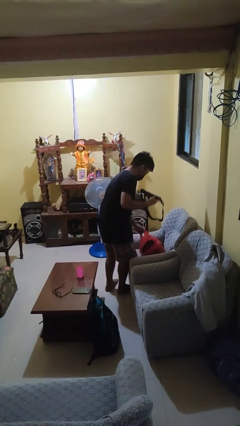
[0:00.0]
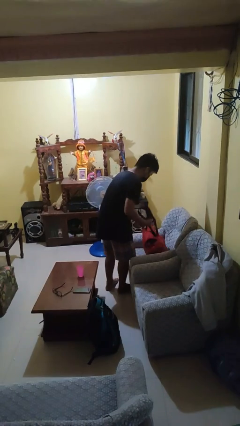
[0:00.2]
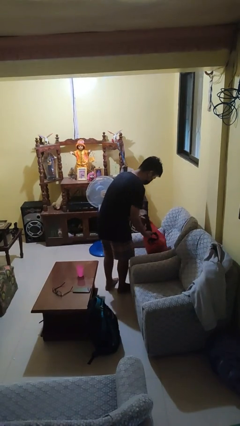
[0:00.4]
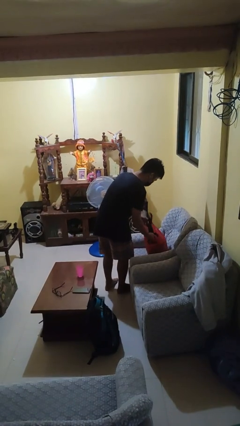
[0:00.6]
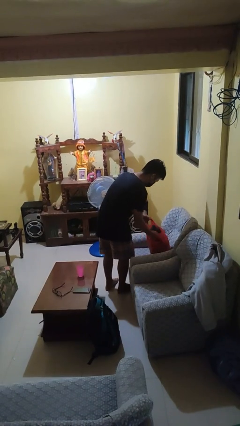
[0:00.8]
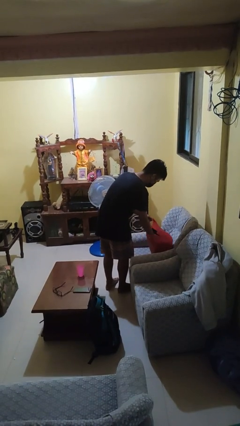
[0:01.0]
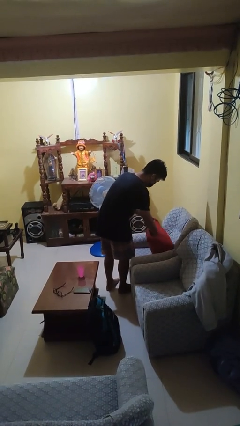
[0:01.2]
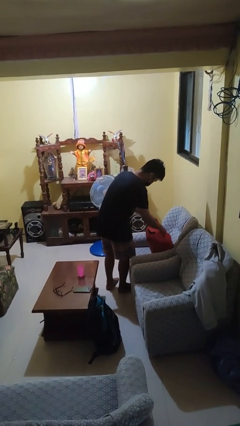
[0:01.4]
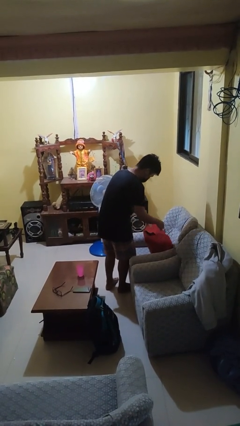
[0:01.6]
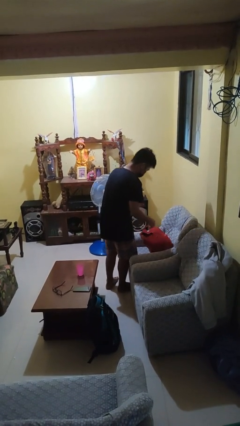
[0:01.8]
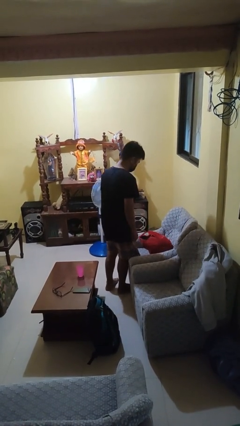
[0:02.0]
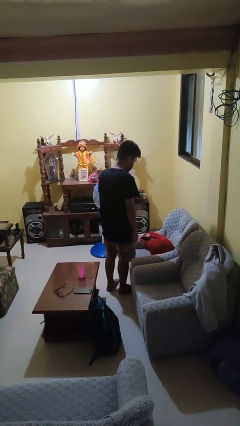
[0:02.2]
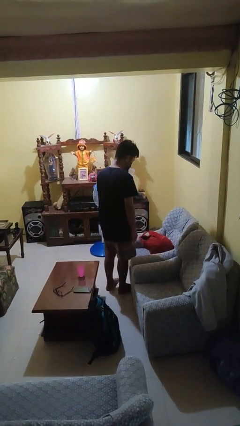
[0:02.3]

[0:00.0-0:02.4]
person puts object into bag

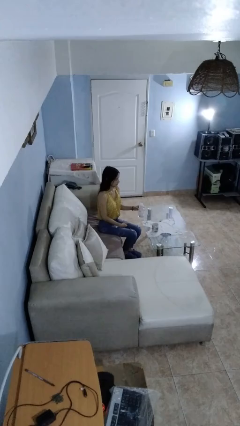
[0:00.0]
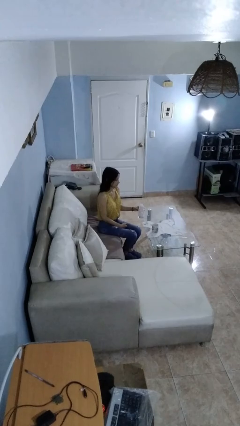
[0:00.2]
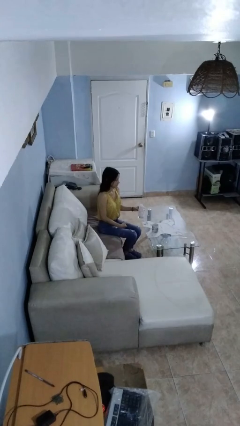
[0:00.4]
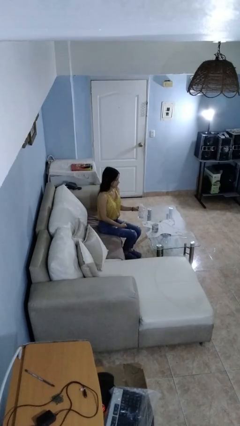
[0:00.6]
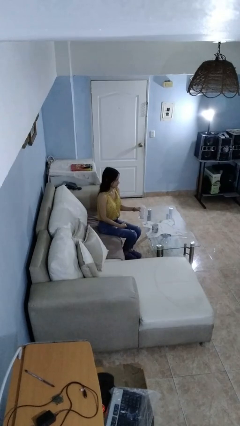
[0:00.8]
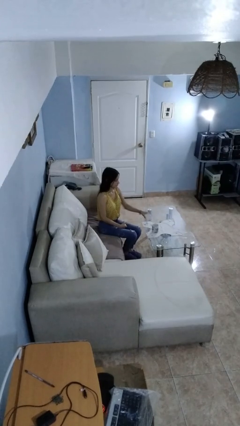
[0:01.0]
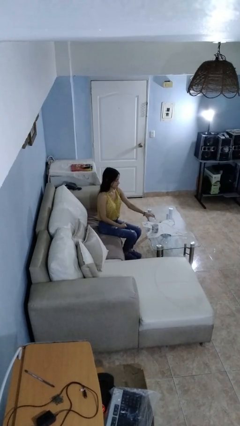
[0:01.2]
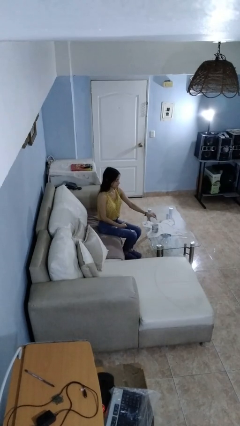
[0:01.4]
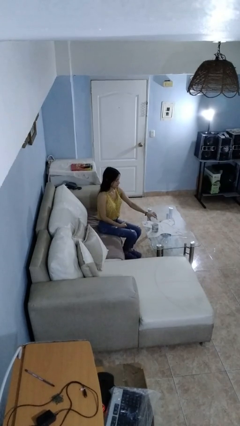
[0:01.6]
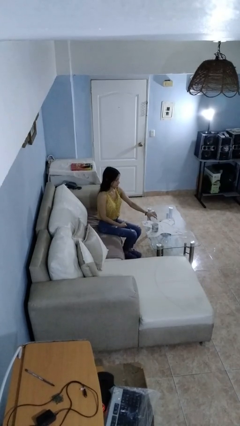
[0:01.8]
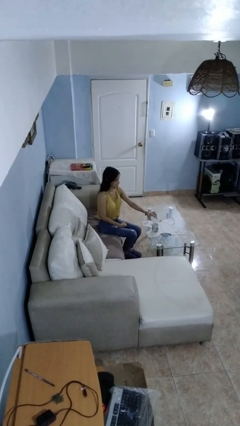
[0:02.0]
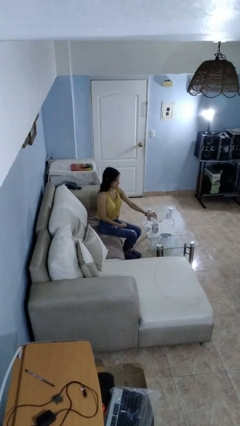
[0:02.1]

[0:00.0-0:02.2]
person pours liquid into cup

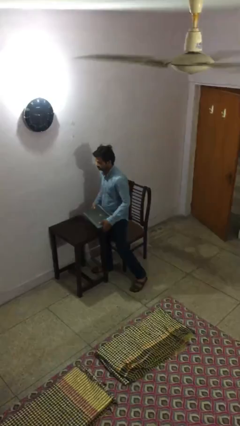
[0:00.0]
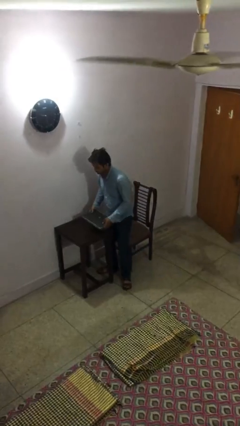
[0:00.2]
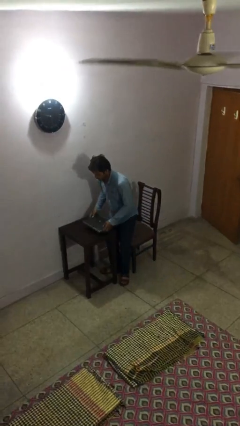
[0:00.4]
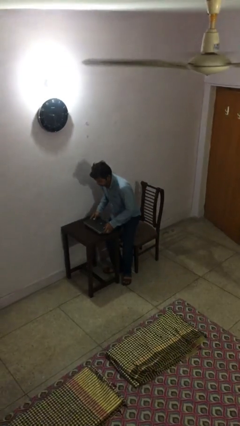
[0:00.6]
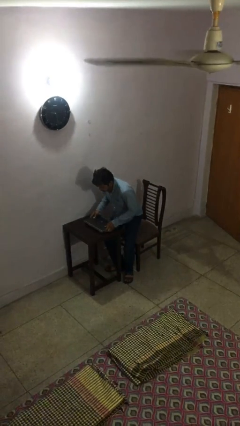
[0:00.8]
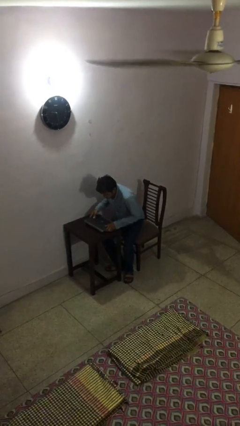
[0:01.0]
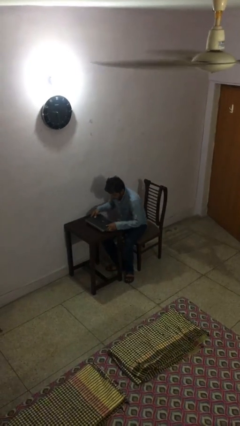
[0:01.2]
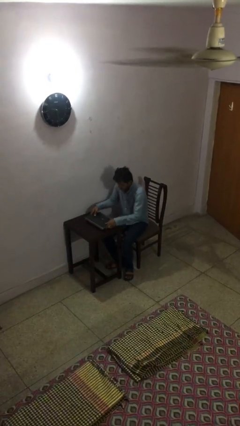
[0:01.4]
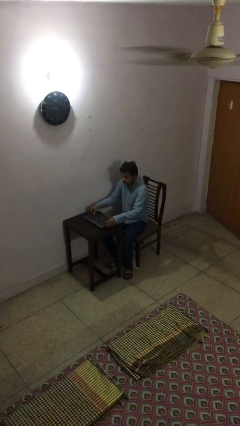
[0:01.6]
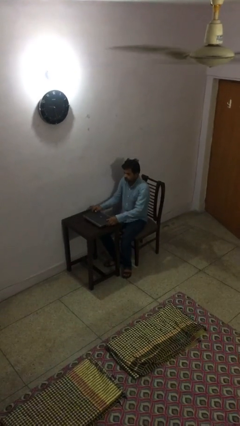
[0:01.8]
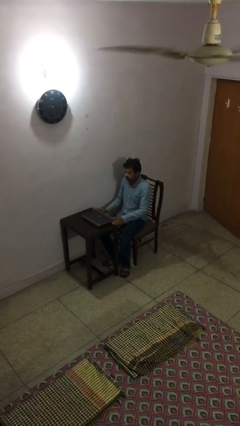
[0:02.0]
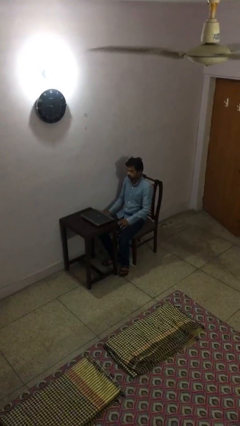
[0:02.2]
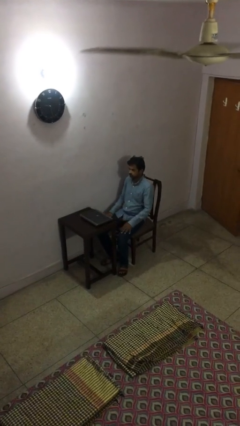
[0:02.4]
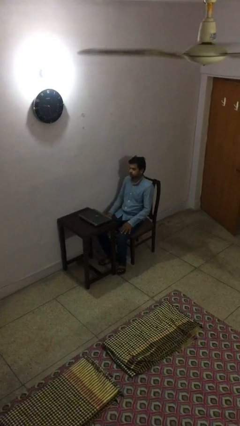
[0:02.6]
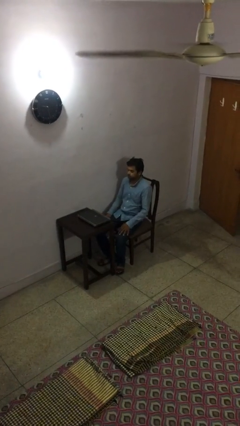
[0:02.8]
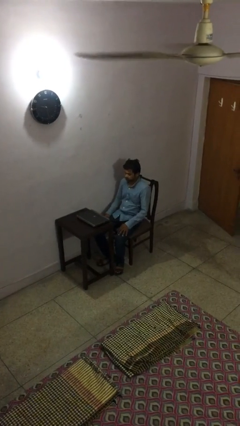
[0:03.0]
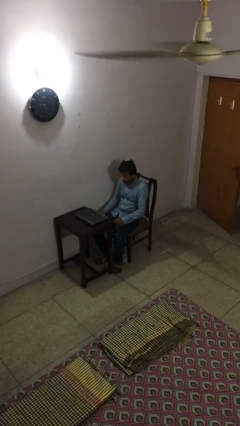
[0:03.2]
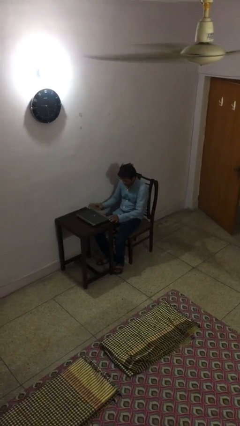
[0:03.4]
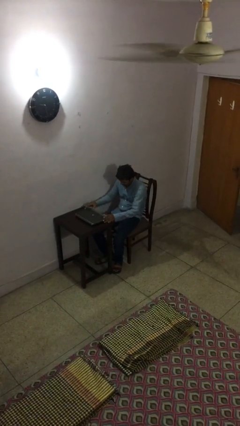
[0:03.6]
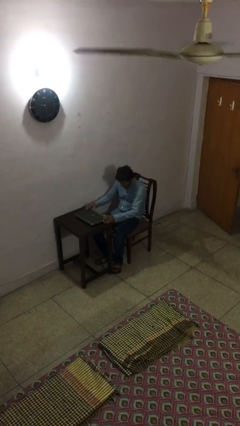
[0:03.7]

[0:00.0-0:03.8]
person sits down

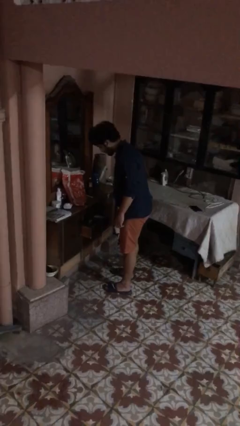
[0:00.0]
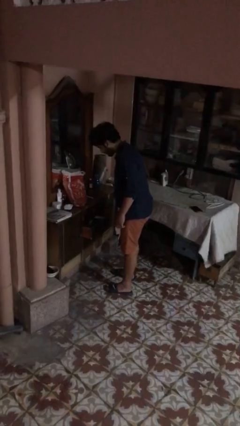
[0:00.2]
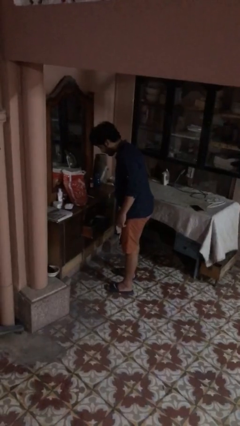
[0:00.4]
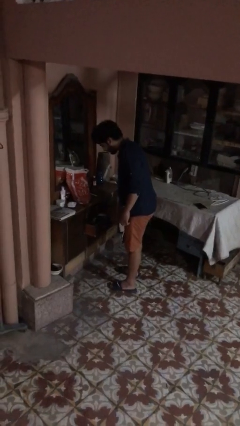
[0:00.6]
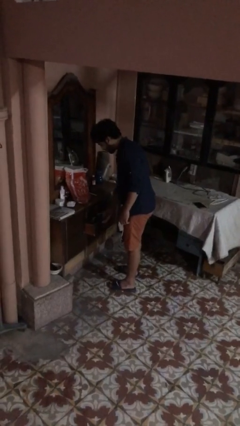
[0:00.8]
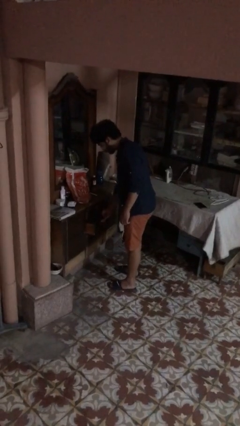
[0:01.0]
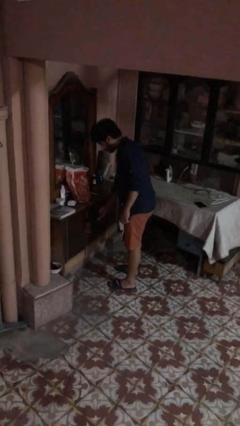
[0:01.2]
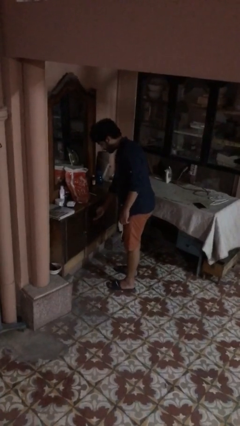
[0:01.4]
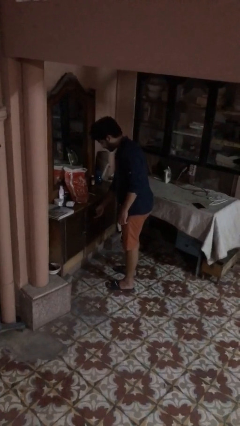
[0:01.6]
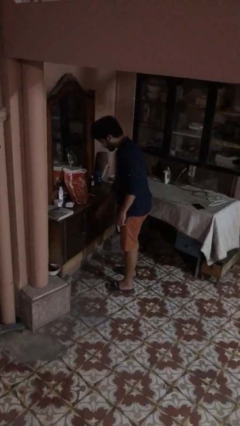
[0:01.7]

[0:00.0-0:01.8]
person closes dresser drawer

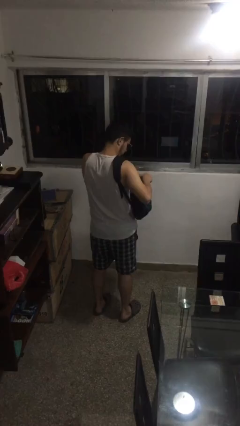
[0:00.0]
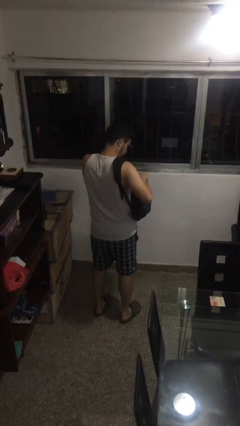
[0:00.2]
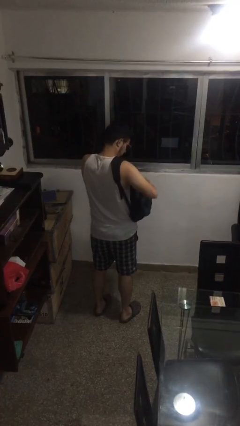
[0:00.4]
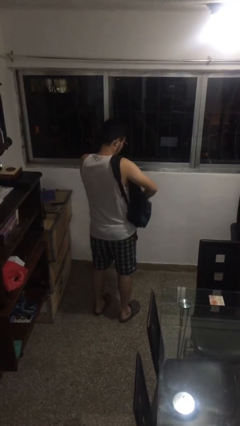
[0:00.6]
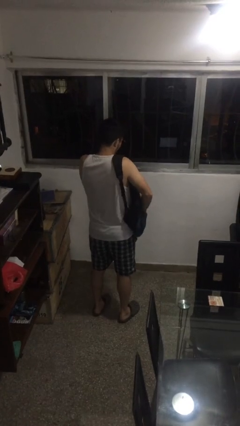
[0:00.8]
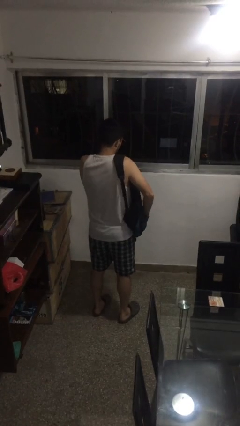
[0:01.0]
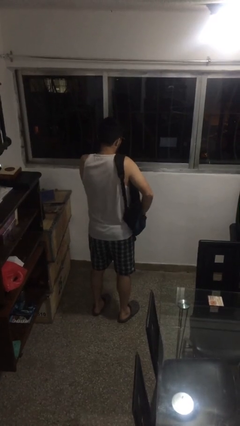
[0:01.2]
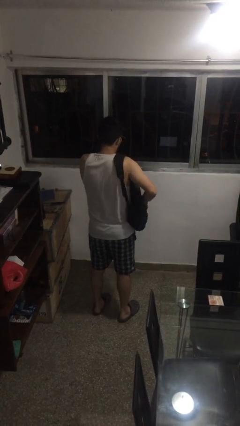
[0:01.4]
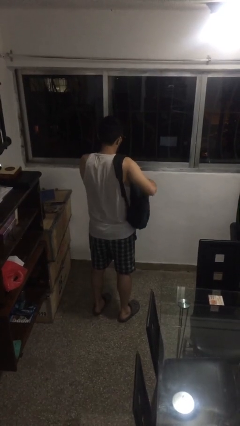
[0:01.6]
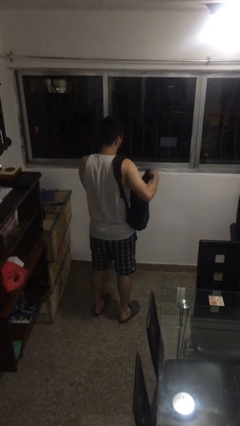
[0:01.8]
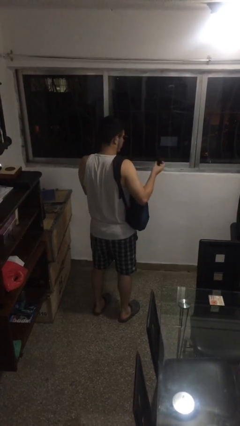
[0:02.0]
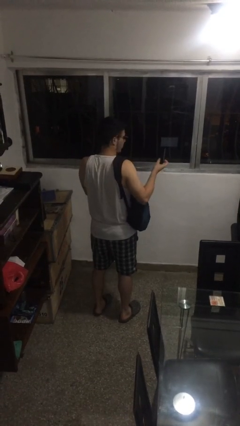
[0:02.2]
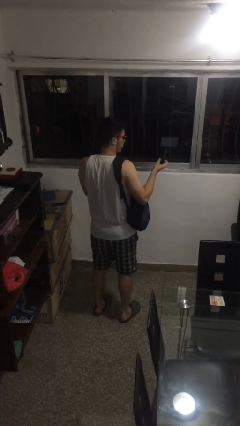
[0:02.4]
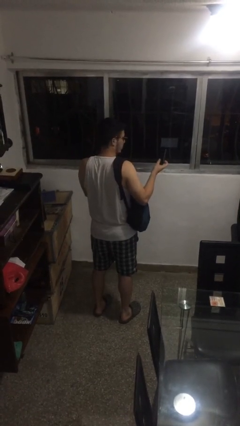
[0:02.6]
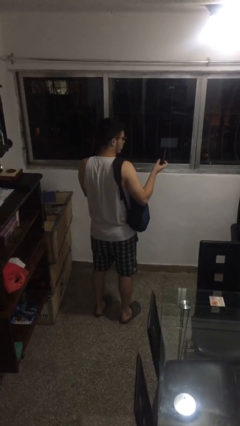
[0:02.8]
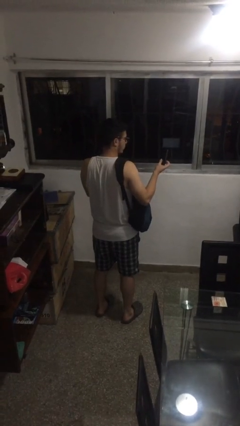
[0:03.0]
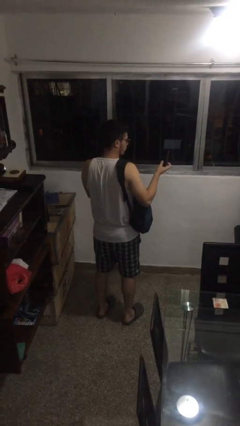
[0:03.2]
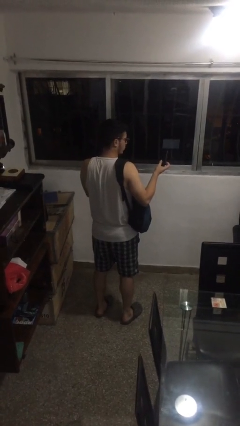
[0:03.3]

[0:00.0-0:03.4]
person takes object from backpack

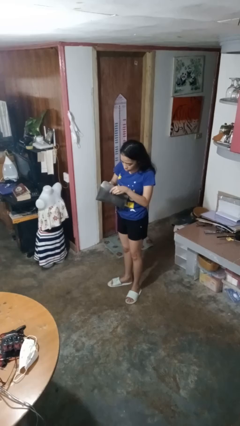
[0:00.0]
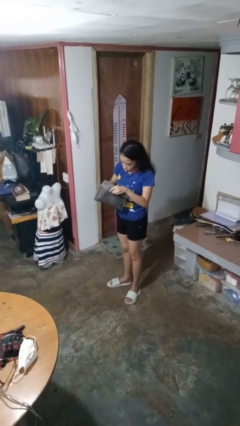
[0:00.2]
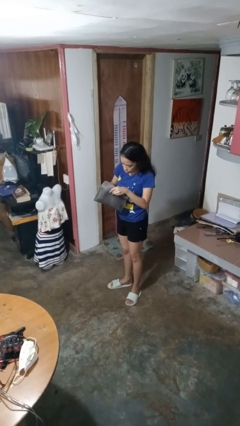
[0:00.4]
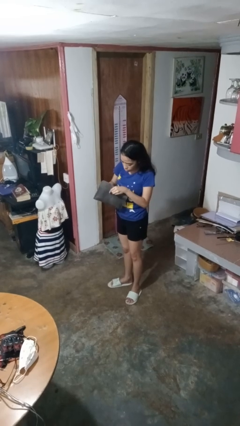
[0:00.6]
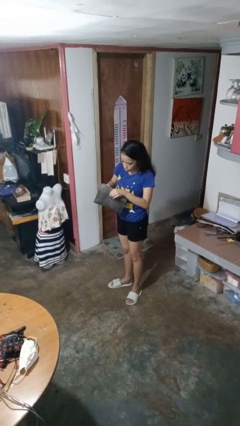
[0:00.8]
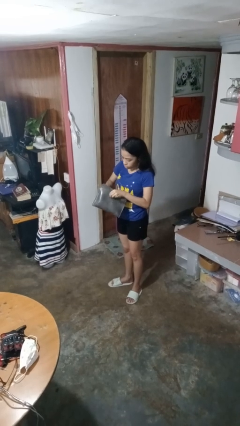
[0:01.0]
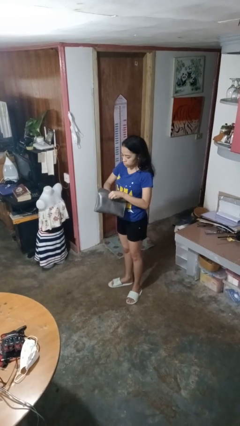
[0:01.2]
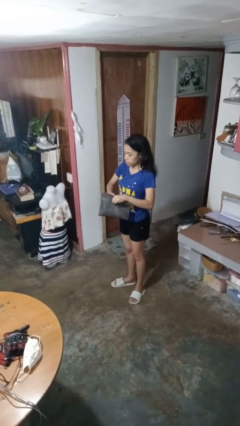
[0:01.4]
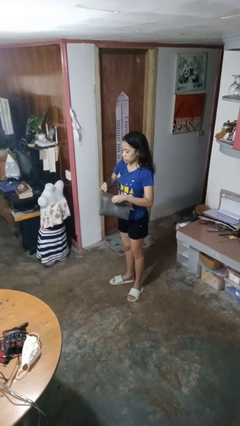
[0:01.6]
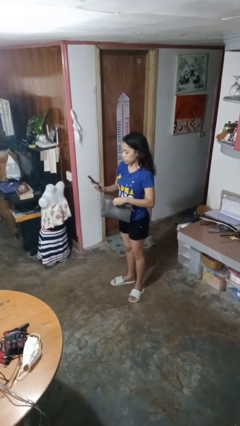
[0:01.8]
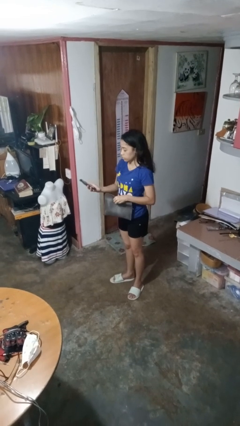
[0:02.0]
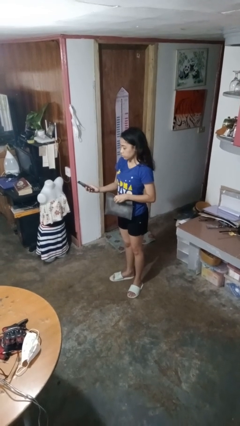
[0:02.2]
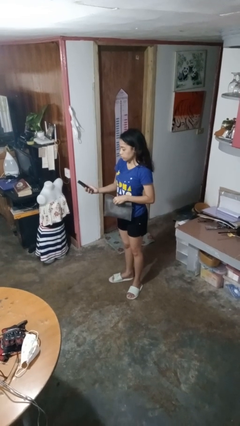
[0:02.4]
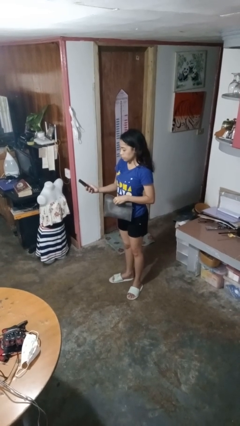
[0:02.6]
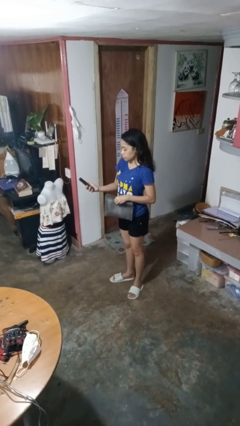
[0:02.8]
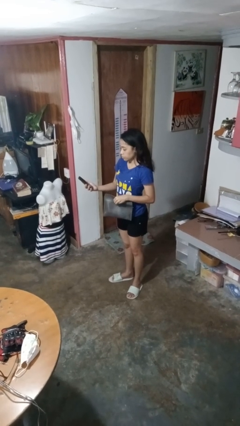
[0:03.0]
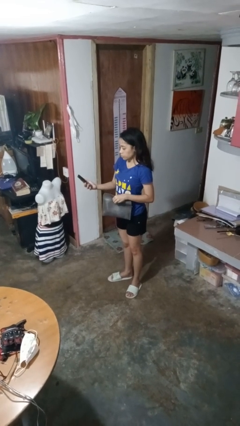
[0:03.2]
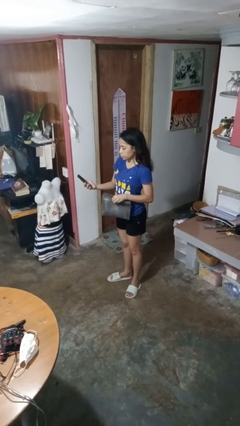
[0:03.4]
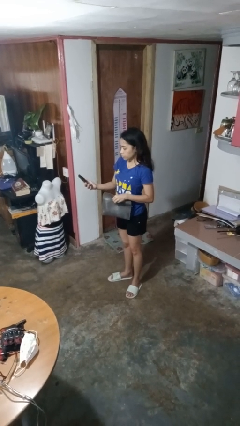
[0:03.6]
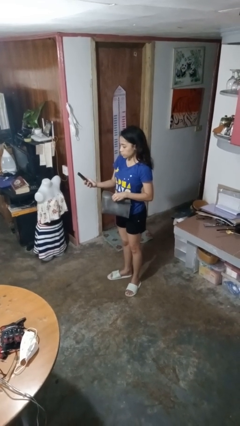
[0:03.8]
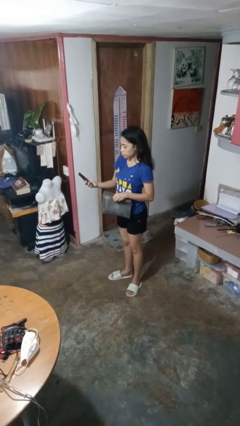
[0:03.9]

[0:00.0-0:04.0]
person takes object from purse
